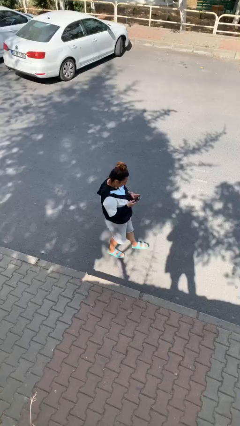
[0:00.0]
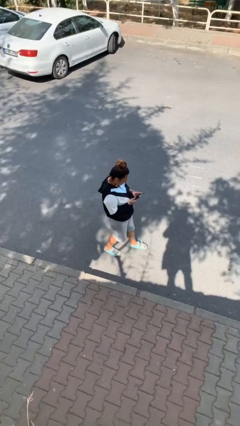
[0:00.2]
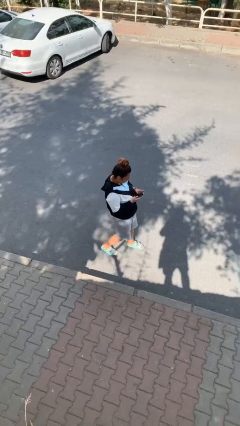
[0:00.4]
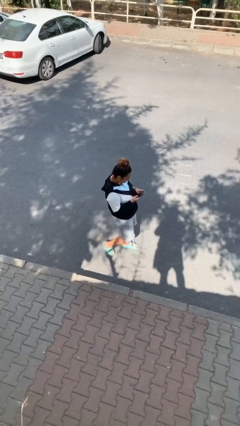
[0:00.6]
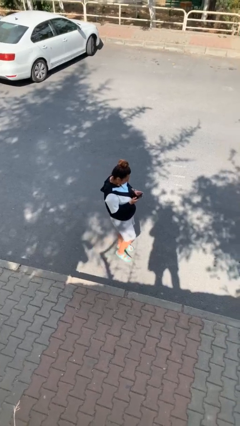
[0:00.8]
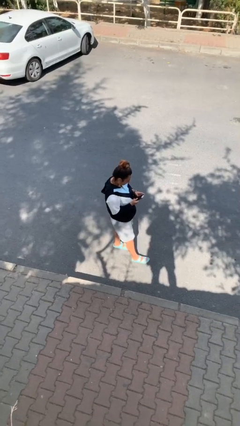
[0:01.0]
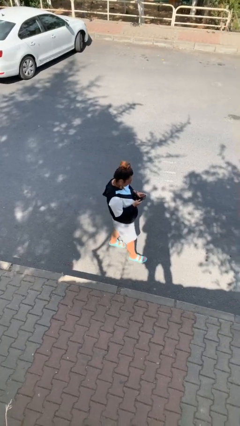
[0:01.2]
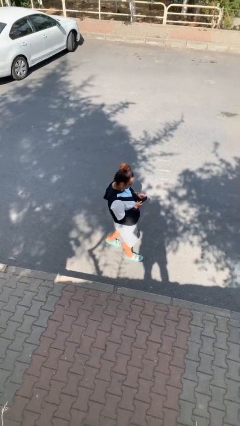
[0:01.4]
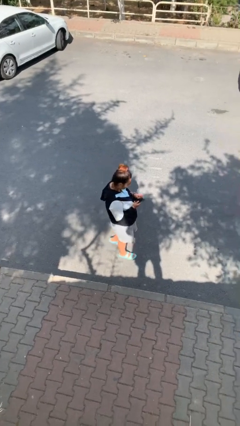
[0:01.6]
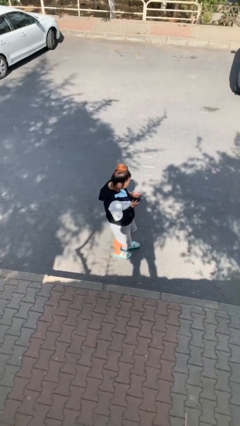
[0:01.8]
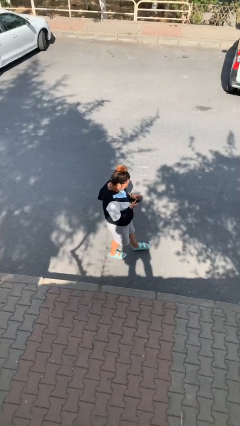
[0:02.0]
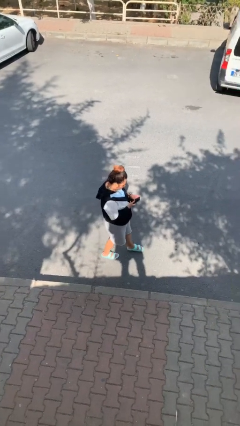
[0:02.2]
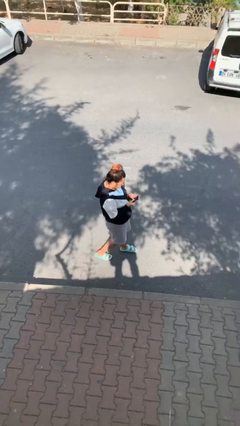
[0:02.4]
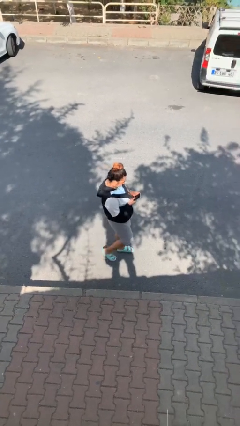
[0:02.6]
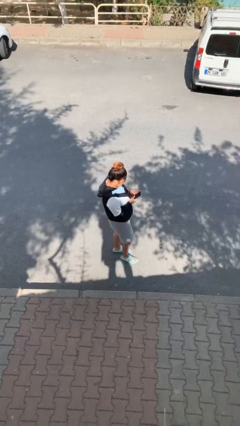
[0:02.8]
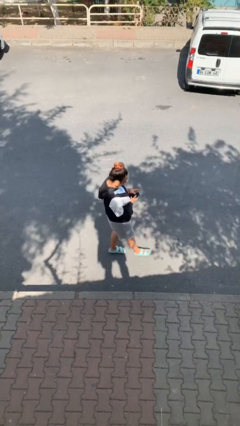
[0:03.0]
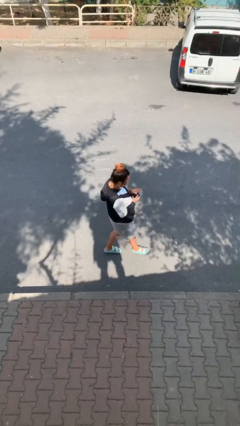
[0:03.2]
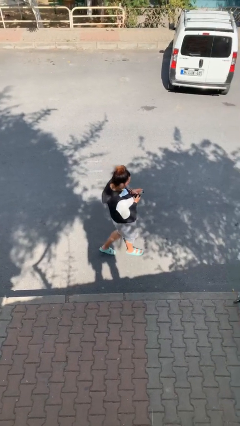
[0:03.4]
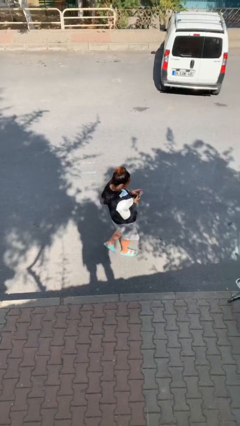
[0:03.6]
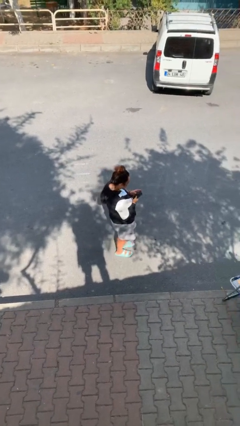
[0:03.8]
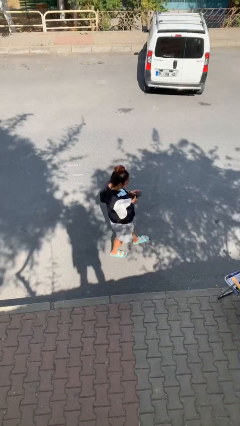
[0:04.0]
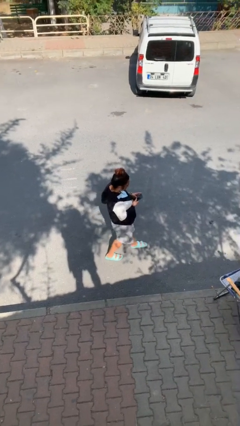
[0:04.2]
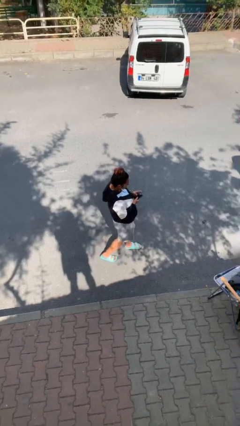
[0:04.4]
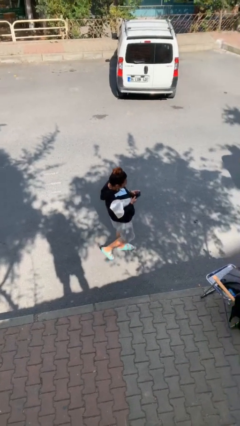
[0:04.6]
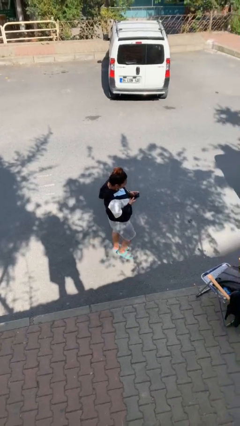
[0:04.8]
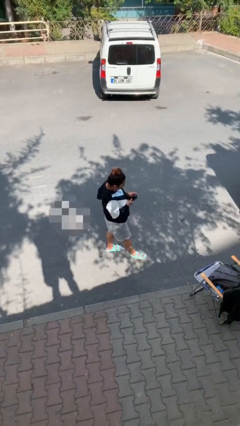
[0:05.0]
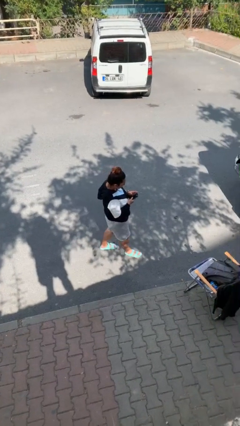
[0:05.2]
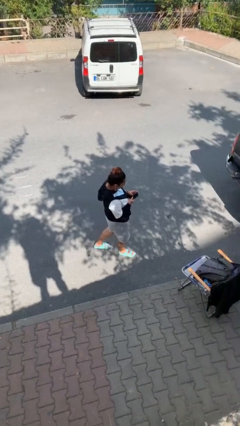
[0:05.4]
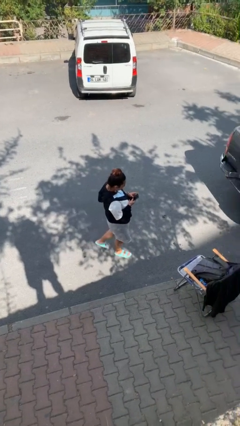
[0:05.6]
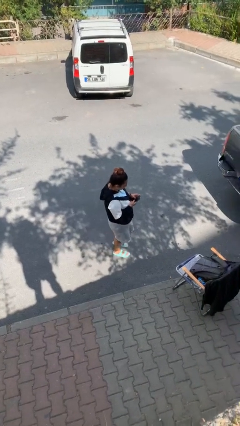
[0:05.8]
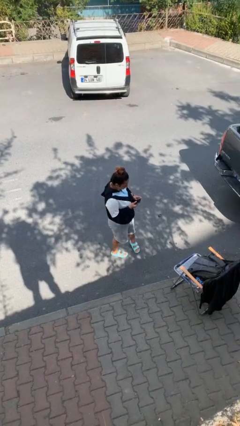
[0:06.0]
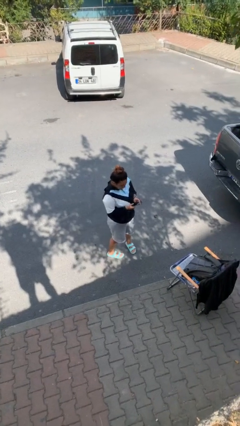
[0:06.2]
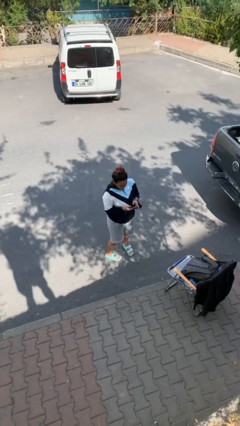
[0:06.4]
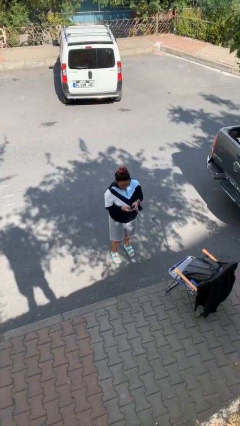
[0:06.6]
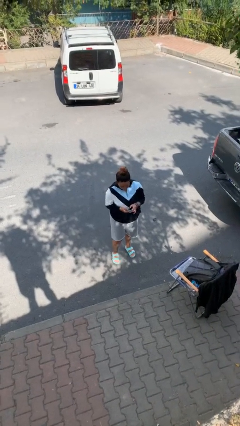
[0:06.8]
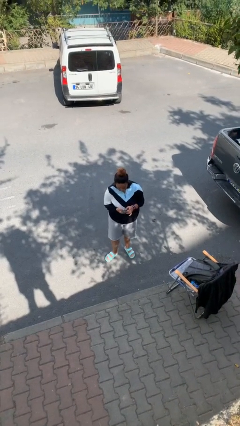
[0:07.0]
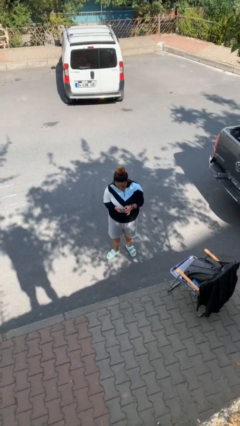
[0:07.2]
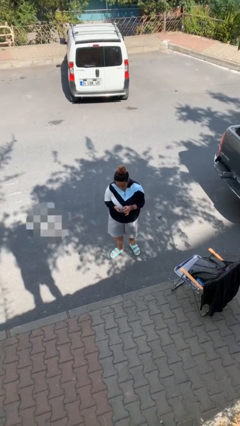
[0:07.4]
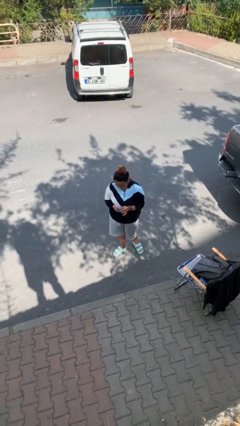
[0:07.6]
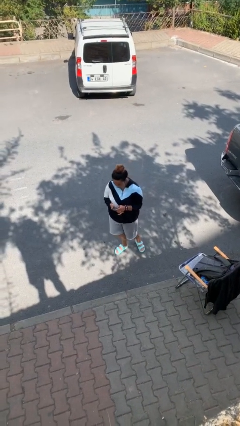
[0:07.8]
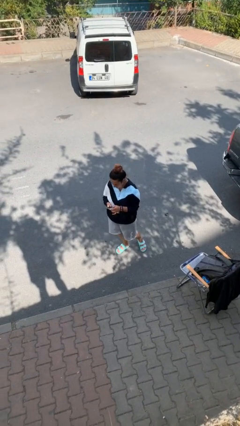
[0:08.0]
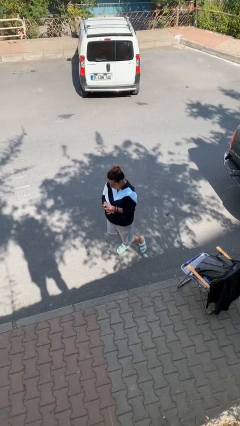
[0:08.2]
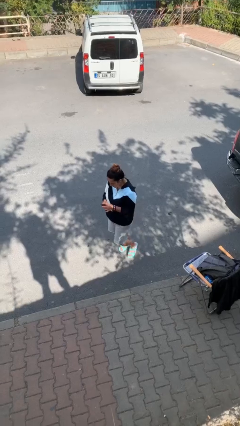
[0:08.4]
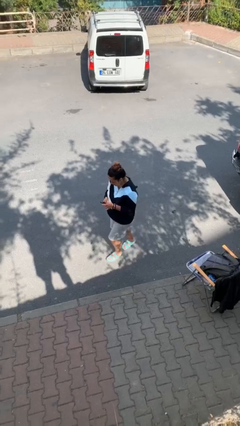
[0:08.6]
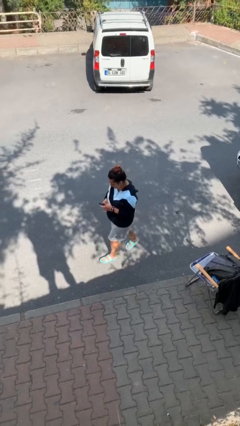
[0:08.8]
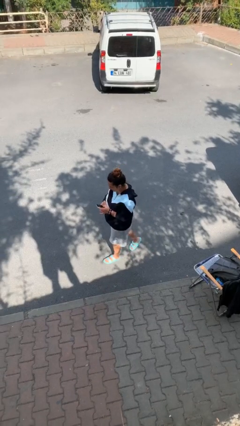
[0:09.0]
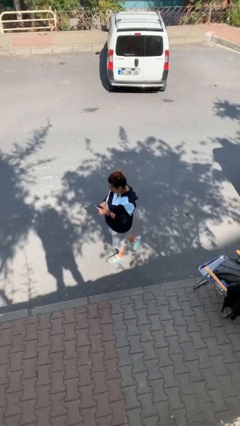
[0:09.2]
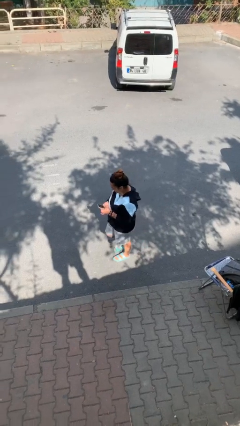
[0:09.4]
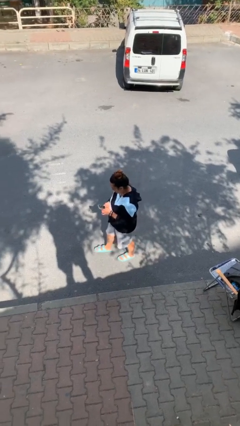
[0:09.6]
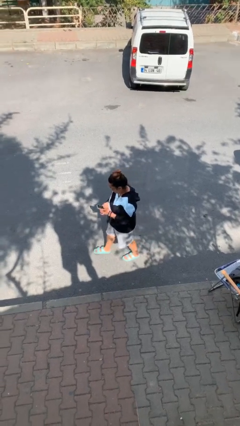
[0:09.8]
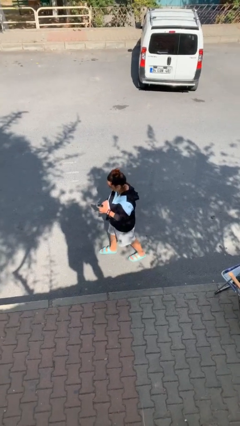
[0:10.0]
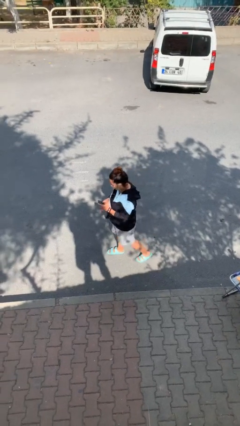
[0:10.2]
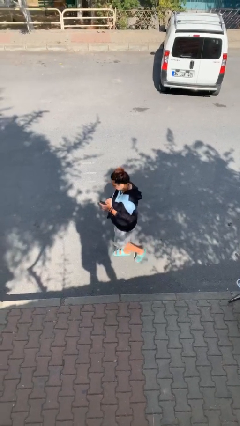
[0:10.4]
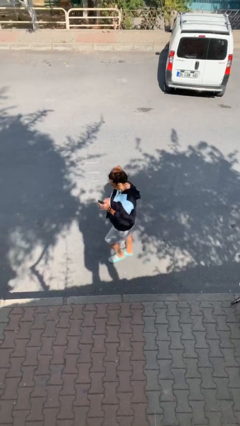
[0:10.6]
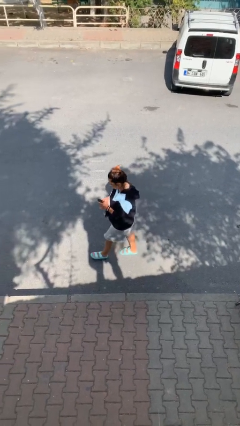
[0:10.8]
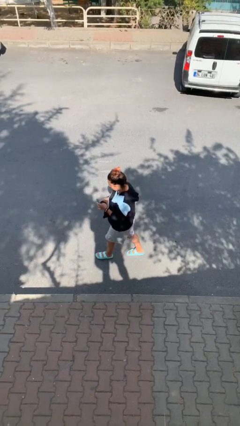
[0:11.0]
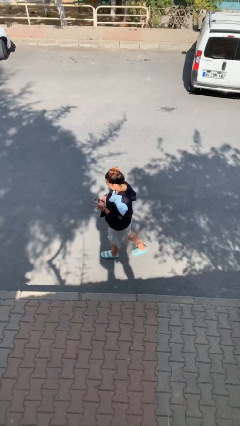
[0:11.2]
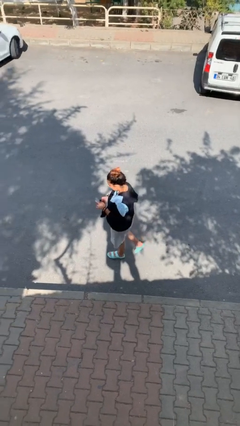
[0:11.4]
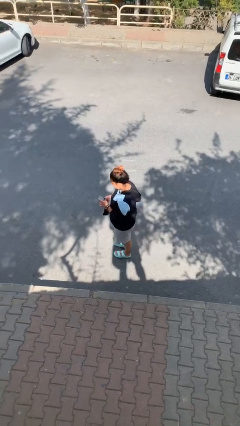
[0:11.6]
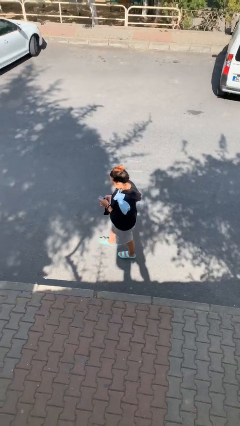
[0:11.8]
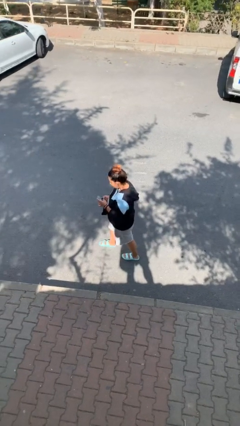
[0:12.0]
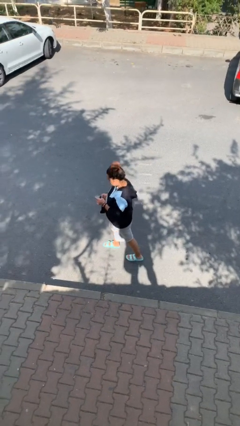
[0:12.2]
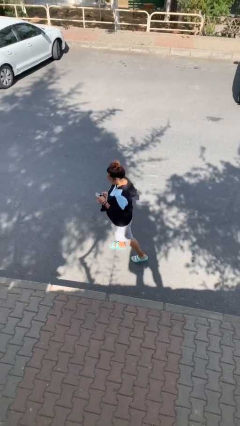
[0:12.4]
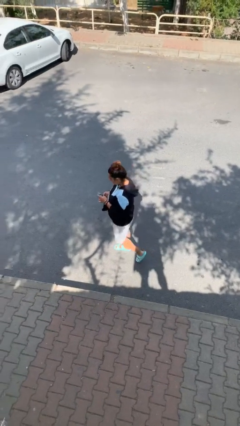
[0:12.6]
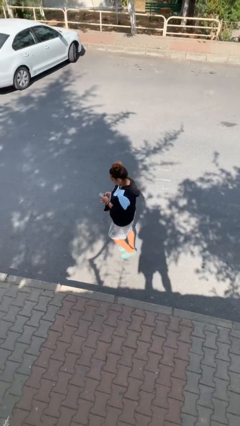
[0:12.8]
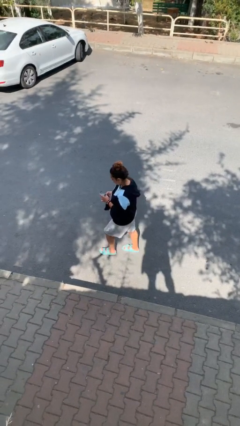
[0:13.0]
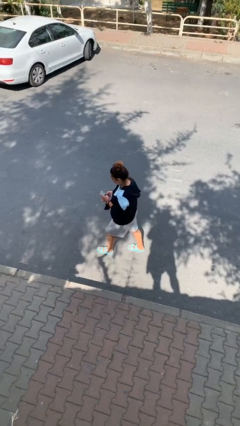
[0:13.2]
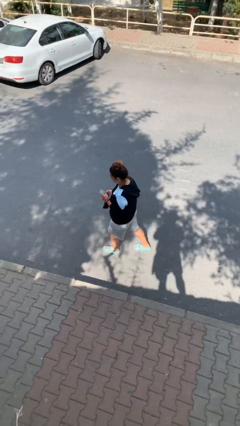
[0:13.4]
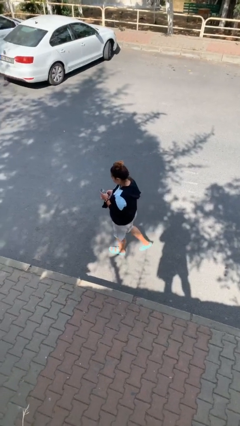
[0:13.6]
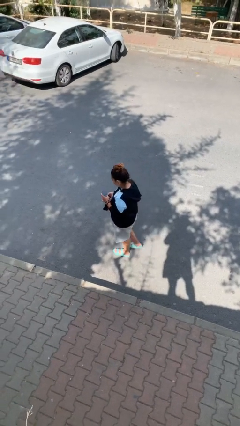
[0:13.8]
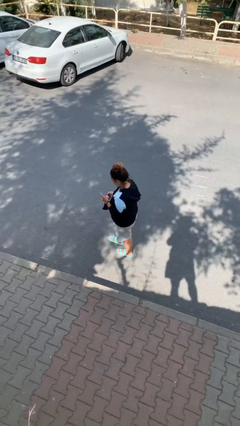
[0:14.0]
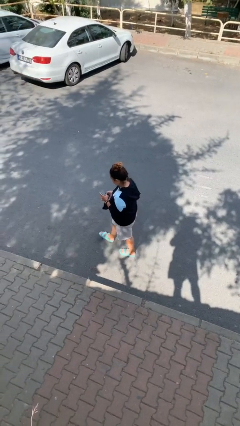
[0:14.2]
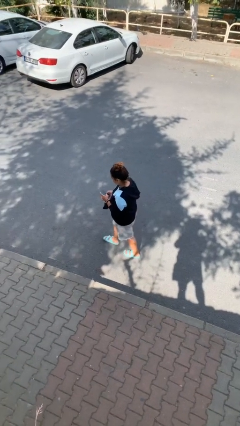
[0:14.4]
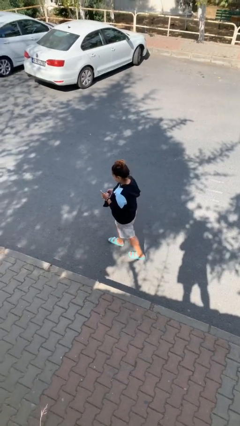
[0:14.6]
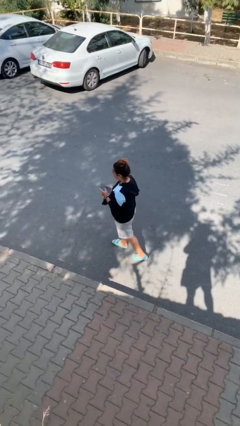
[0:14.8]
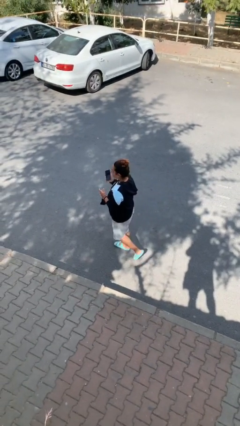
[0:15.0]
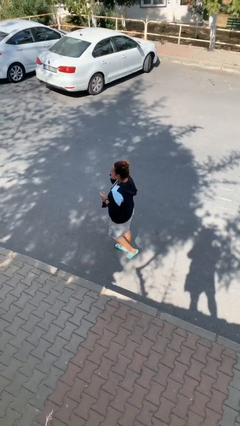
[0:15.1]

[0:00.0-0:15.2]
person texts on phone

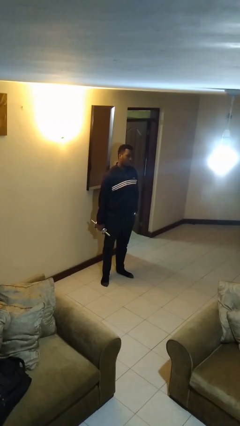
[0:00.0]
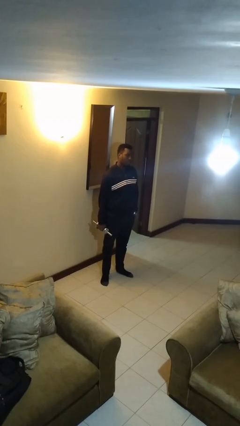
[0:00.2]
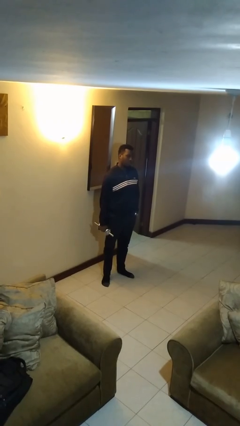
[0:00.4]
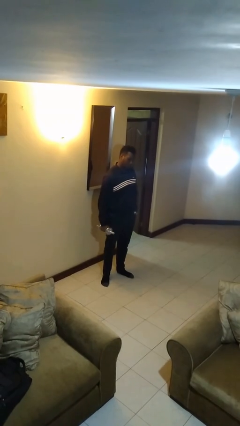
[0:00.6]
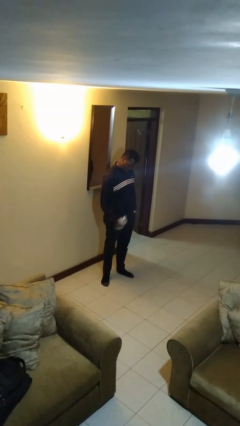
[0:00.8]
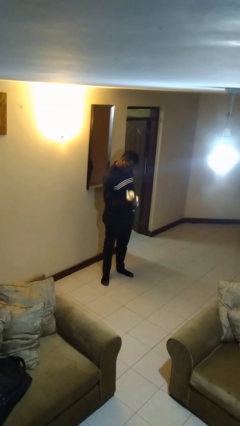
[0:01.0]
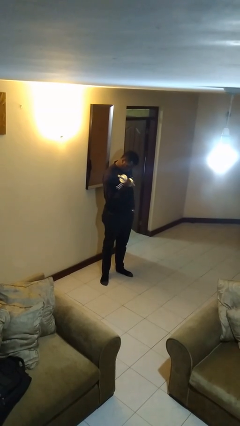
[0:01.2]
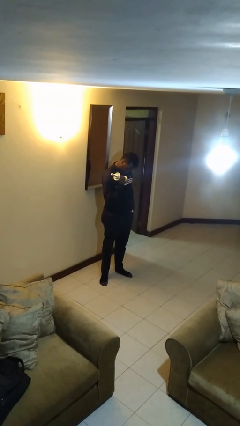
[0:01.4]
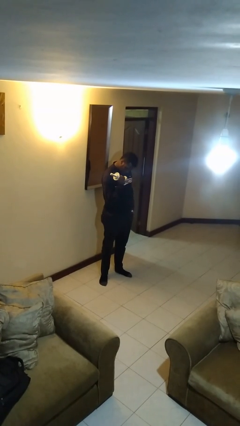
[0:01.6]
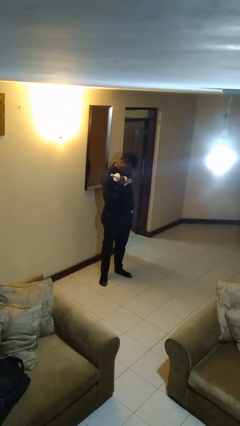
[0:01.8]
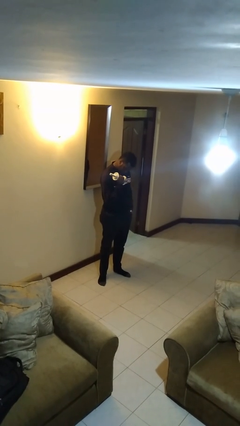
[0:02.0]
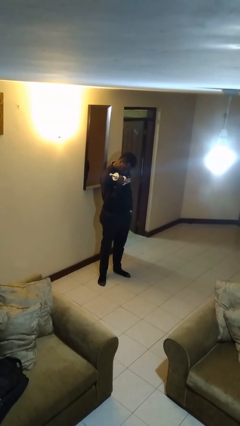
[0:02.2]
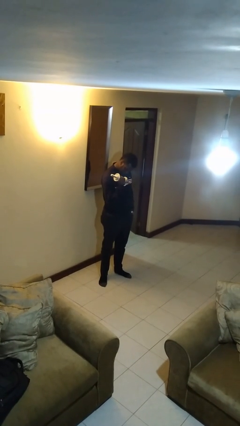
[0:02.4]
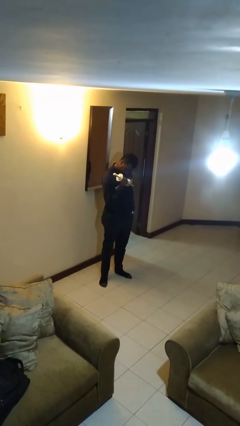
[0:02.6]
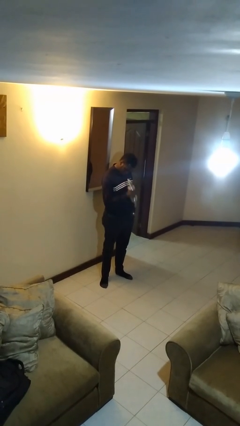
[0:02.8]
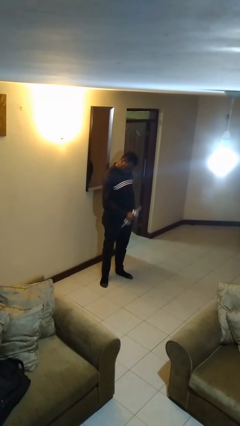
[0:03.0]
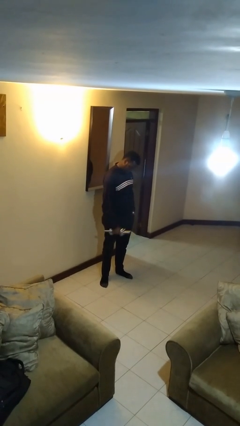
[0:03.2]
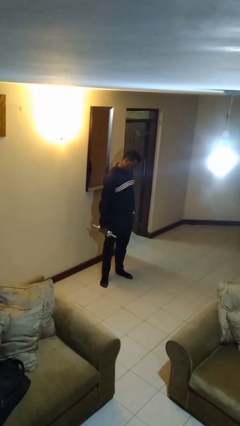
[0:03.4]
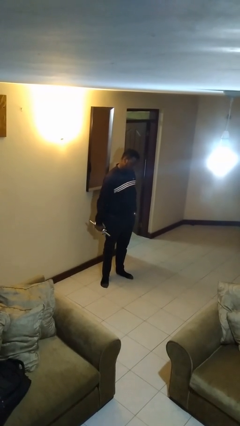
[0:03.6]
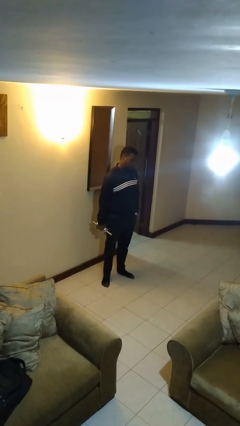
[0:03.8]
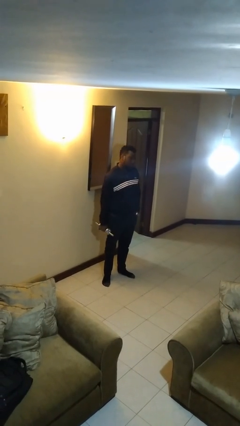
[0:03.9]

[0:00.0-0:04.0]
person lifts dumbbells
